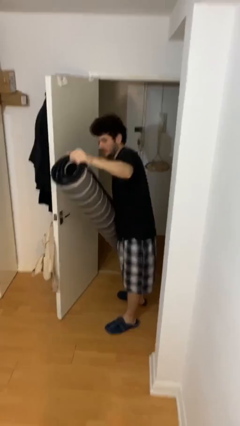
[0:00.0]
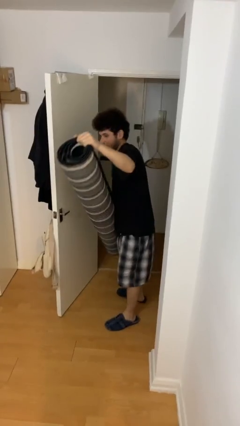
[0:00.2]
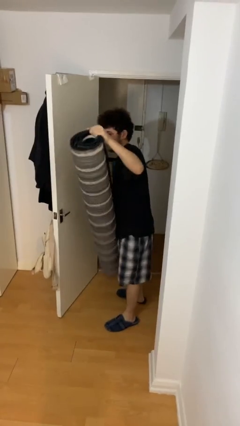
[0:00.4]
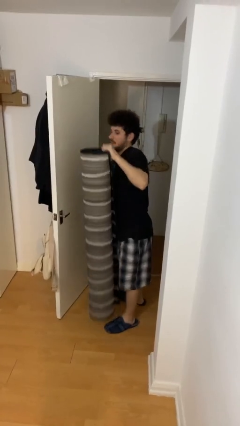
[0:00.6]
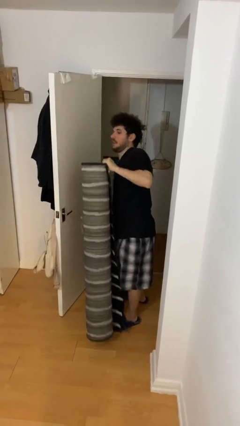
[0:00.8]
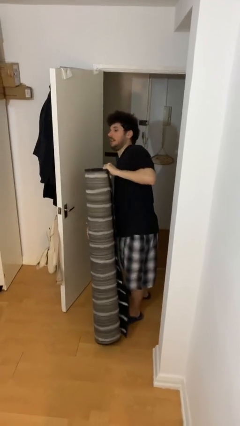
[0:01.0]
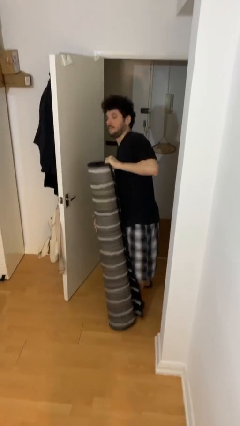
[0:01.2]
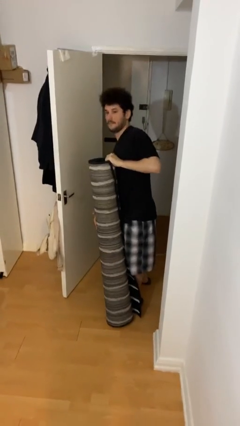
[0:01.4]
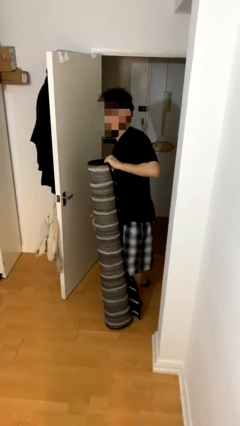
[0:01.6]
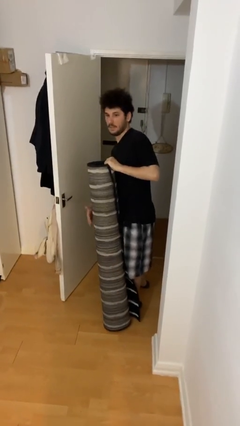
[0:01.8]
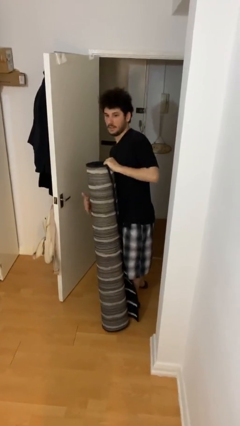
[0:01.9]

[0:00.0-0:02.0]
person puts down object on floor

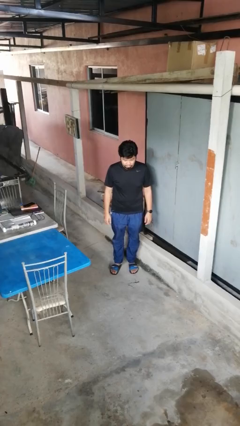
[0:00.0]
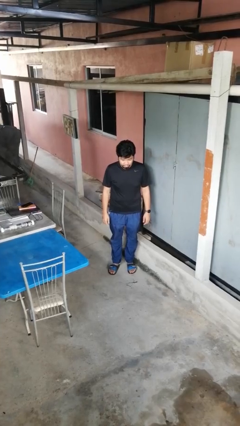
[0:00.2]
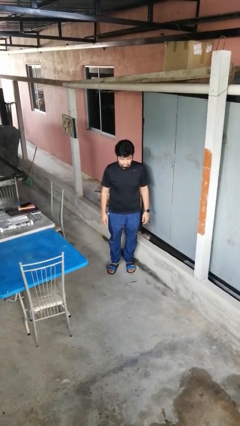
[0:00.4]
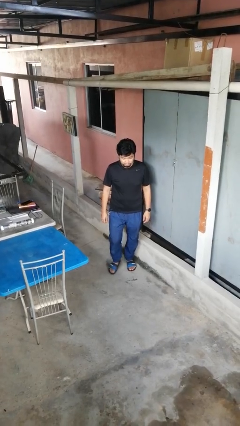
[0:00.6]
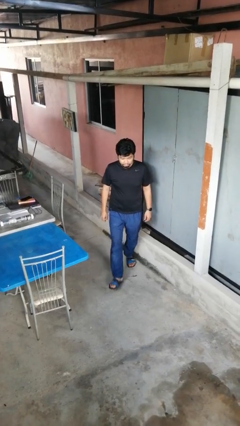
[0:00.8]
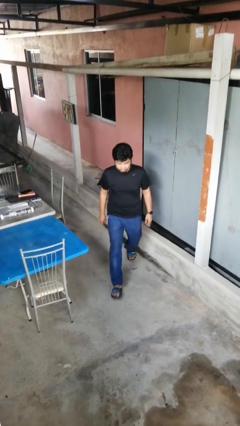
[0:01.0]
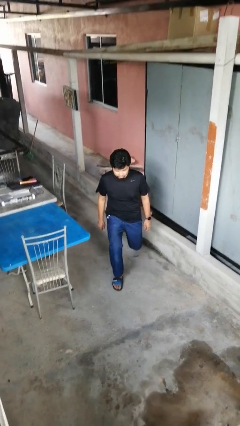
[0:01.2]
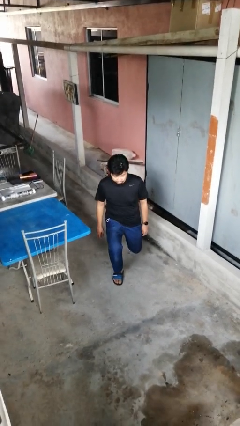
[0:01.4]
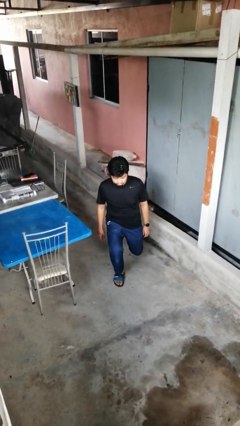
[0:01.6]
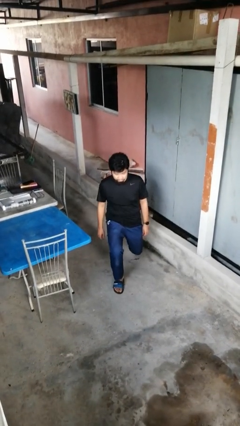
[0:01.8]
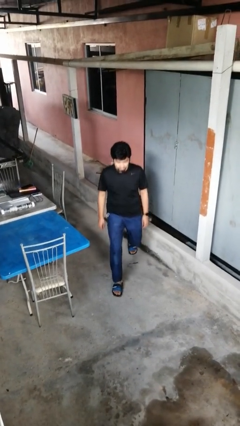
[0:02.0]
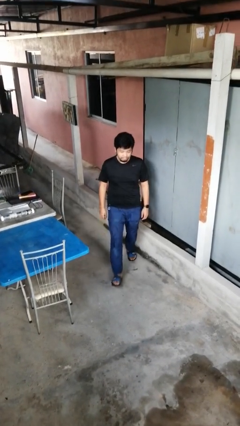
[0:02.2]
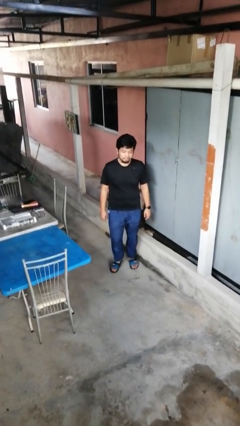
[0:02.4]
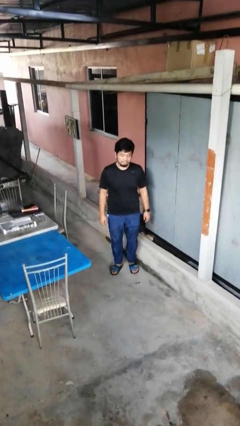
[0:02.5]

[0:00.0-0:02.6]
person exercises with lunges

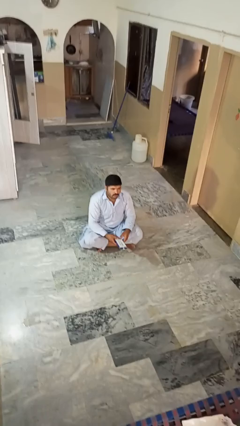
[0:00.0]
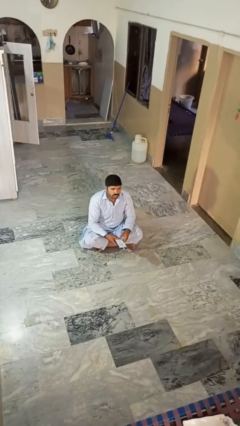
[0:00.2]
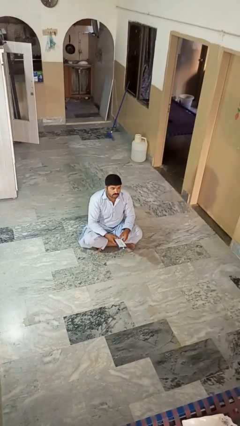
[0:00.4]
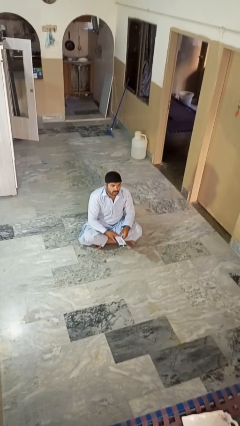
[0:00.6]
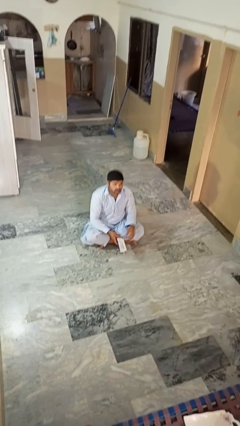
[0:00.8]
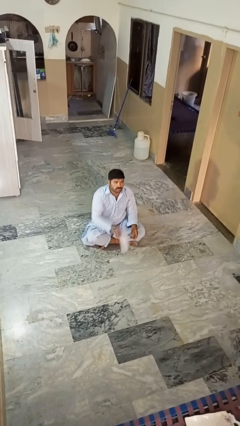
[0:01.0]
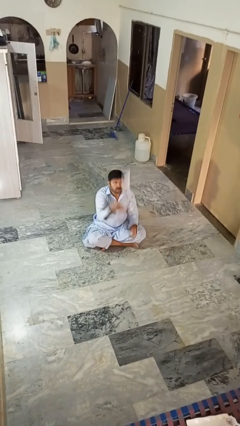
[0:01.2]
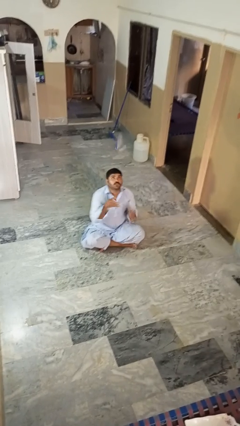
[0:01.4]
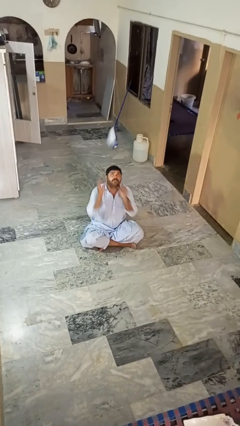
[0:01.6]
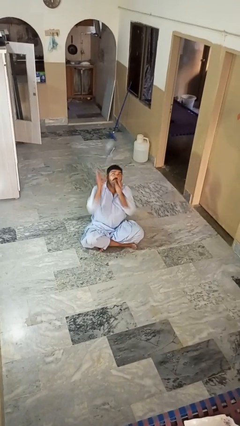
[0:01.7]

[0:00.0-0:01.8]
person drops object

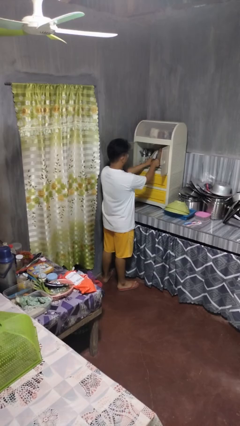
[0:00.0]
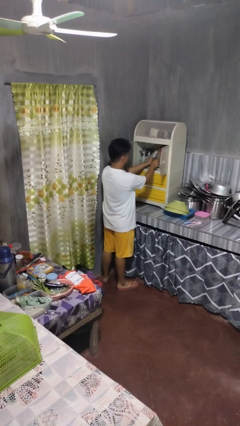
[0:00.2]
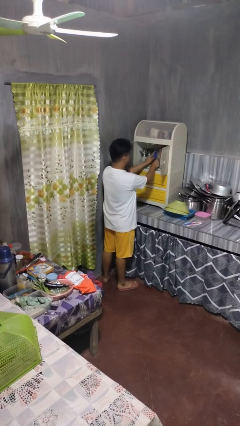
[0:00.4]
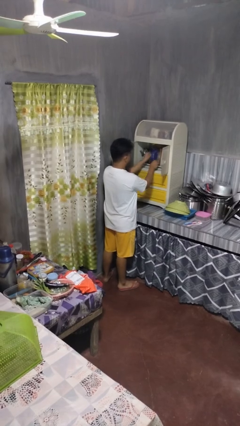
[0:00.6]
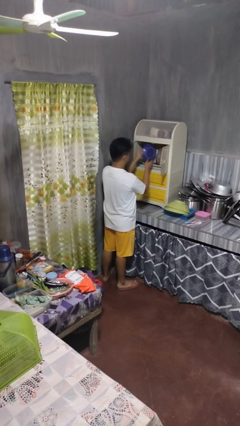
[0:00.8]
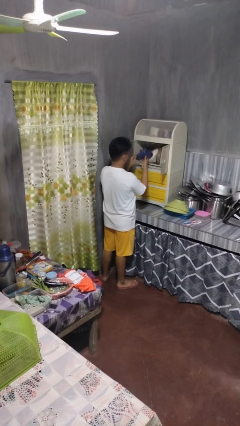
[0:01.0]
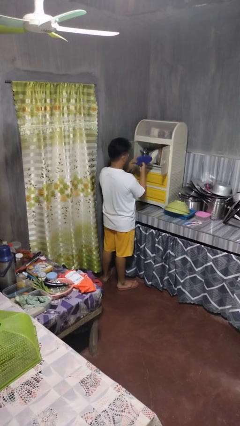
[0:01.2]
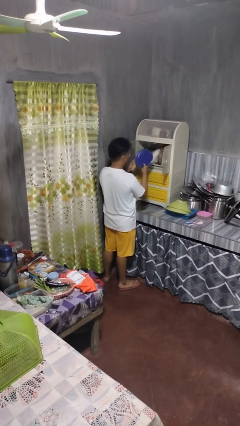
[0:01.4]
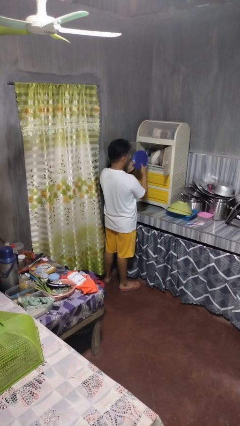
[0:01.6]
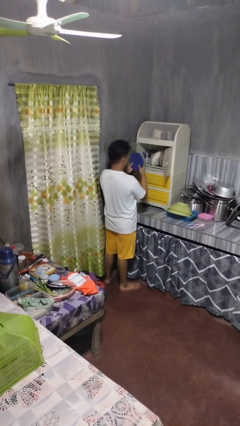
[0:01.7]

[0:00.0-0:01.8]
person takes object from cabinet

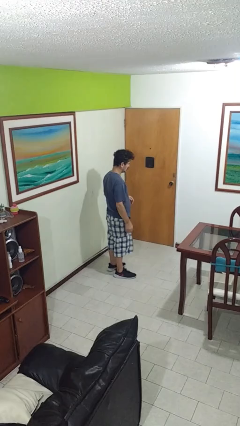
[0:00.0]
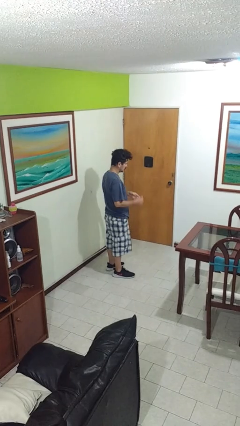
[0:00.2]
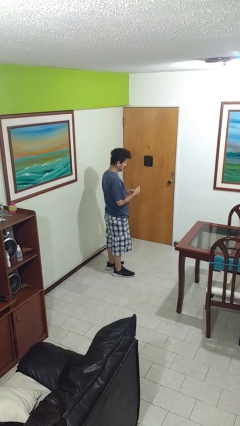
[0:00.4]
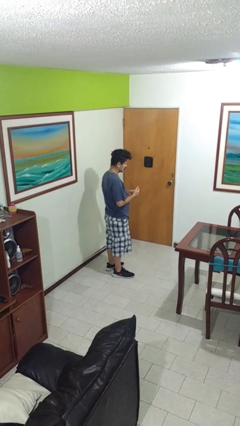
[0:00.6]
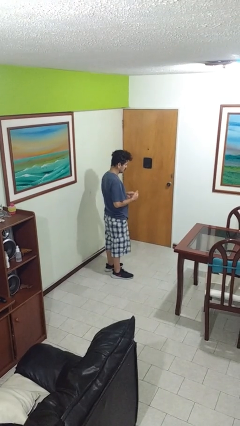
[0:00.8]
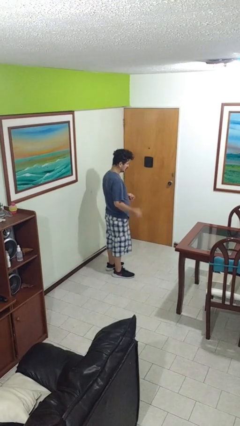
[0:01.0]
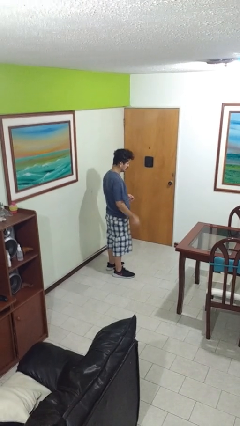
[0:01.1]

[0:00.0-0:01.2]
person takes off ring

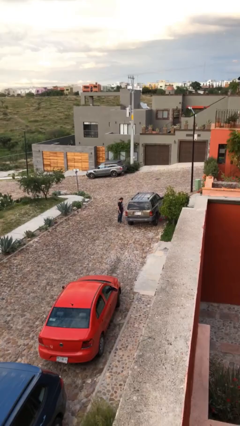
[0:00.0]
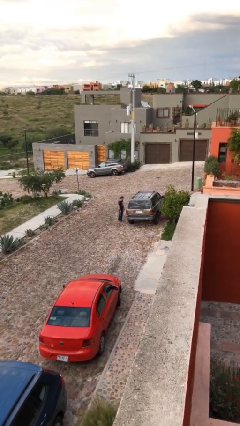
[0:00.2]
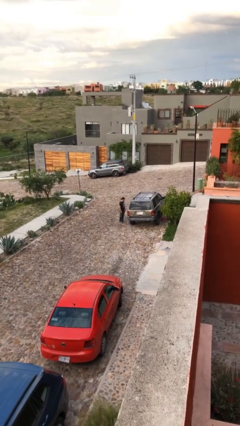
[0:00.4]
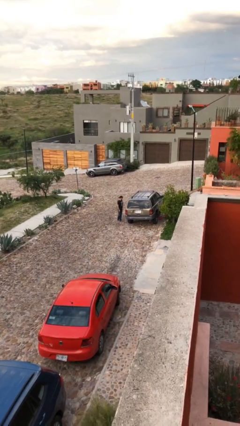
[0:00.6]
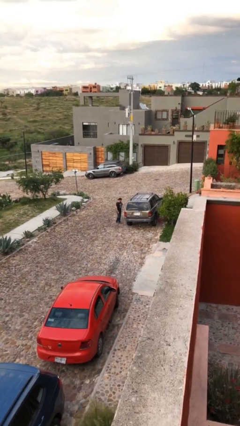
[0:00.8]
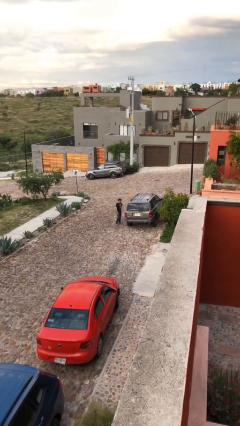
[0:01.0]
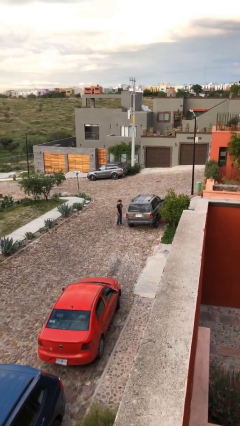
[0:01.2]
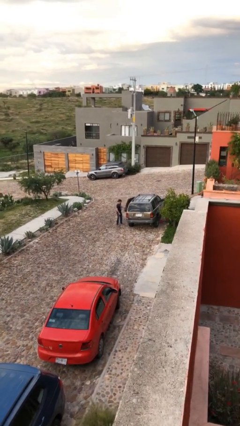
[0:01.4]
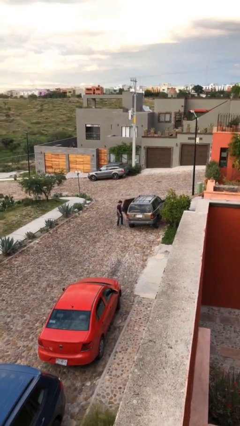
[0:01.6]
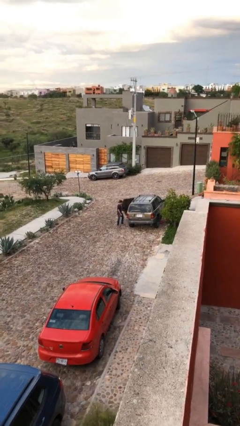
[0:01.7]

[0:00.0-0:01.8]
person opens car door

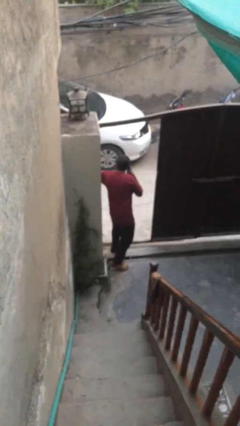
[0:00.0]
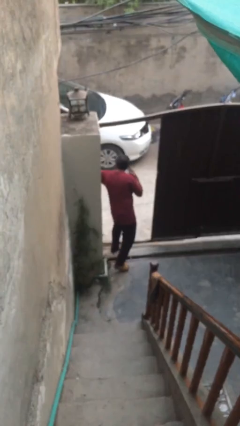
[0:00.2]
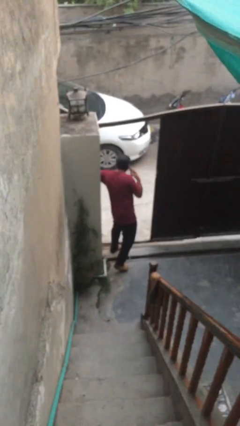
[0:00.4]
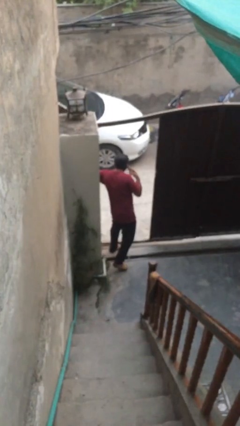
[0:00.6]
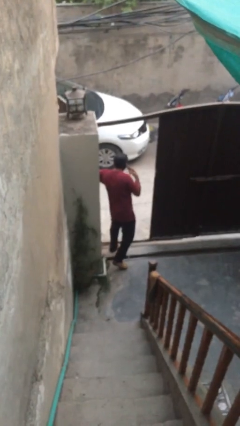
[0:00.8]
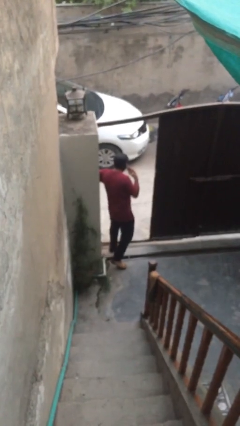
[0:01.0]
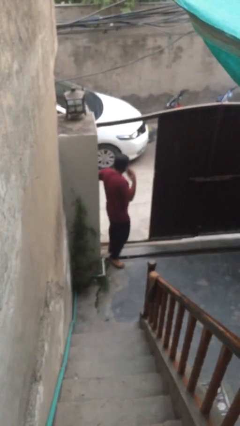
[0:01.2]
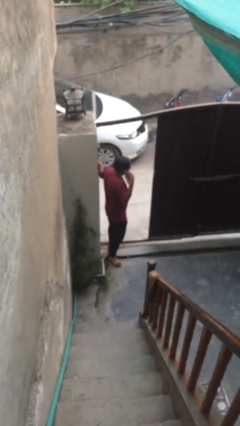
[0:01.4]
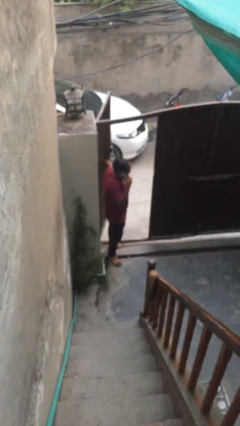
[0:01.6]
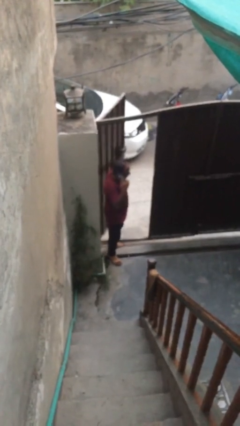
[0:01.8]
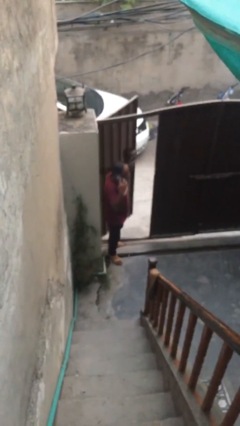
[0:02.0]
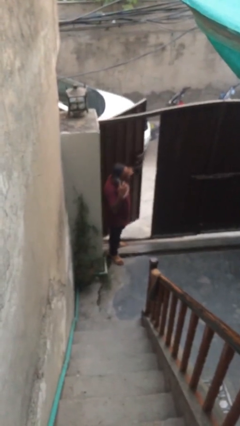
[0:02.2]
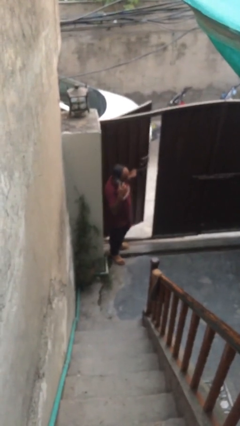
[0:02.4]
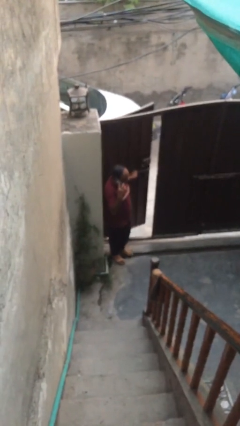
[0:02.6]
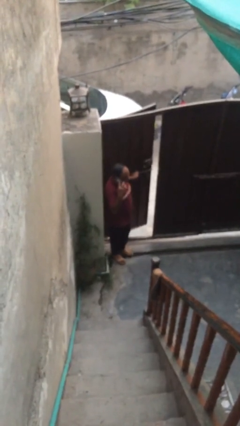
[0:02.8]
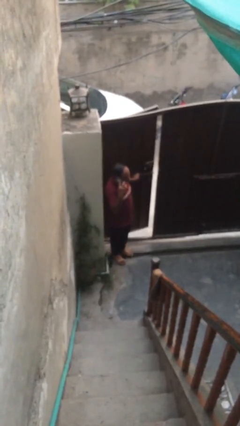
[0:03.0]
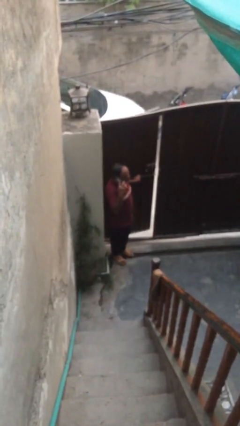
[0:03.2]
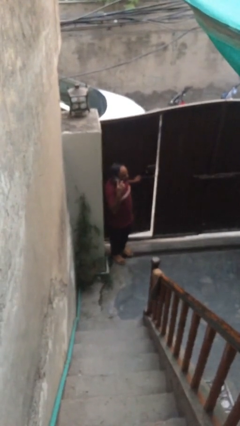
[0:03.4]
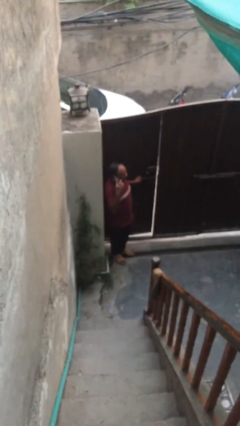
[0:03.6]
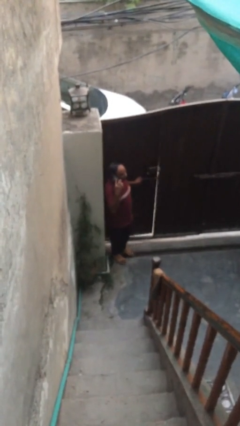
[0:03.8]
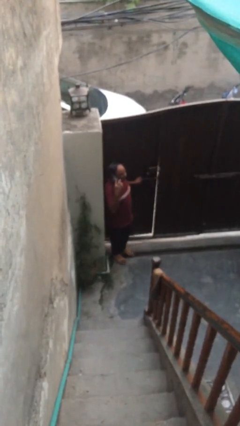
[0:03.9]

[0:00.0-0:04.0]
person closes facility door

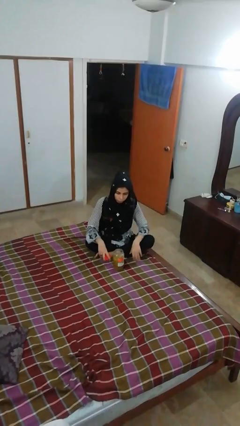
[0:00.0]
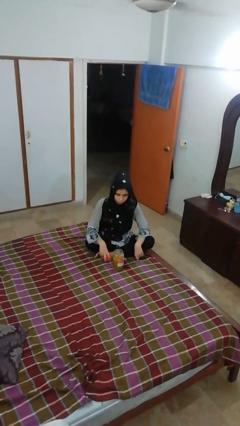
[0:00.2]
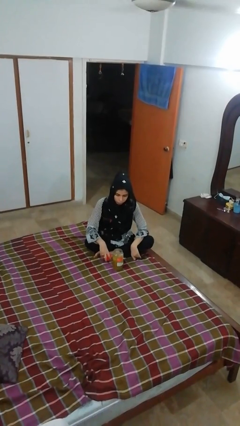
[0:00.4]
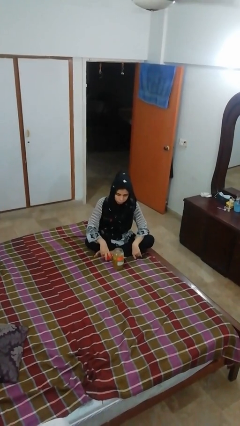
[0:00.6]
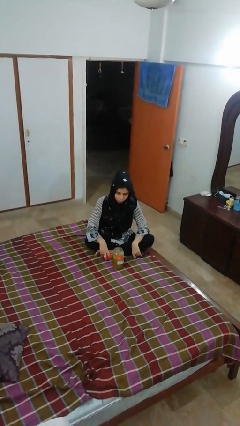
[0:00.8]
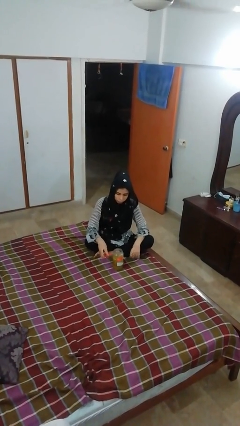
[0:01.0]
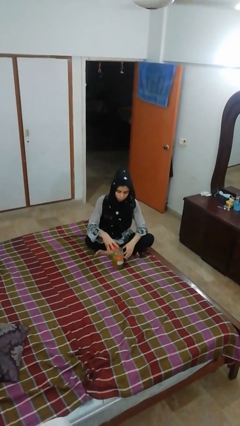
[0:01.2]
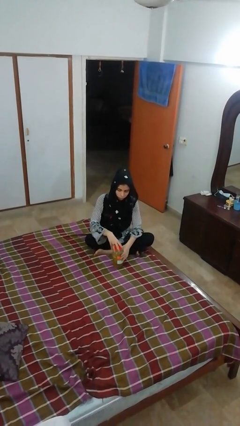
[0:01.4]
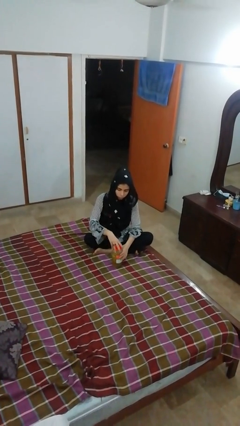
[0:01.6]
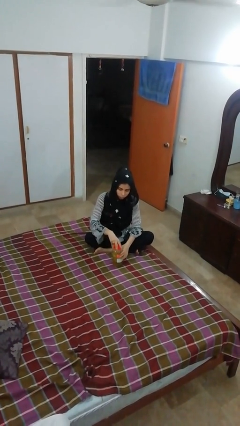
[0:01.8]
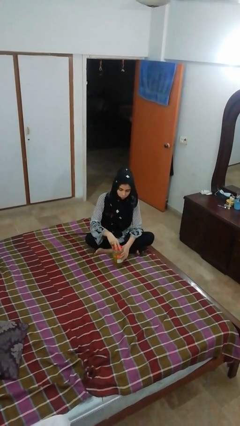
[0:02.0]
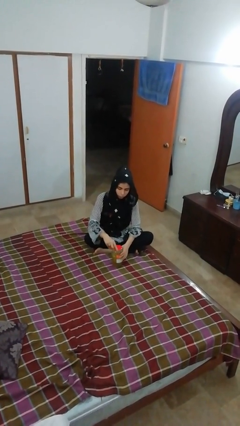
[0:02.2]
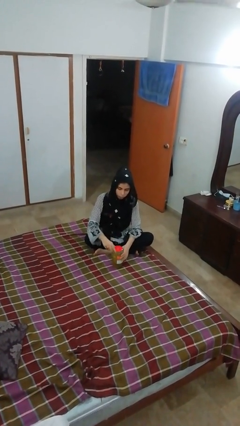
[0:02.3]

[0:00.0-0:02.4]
person closes jar
